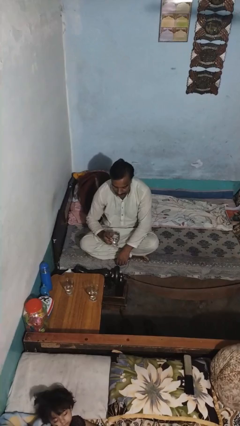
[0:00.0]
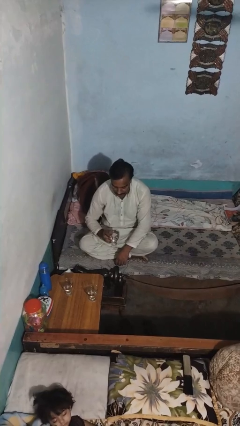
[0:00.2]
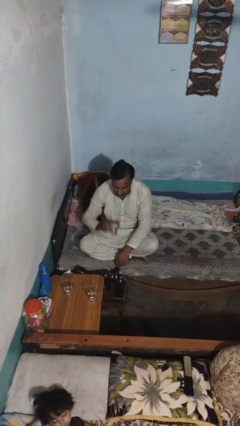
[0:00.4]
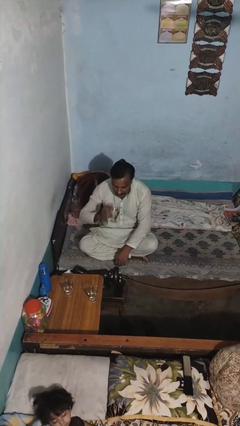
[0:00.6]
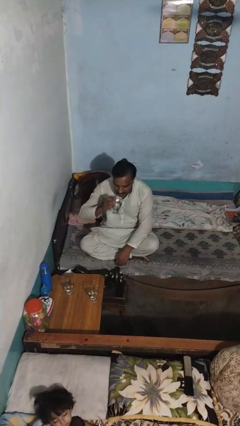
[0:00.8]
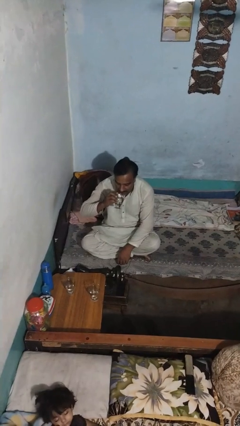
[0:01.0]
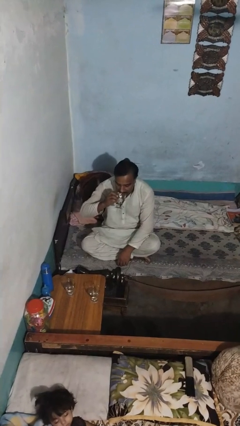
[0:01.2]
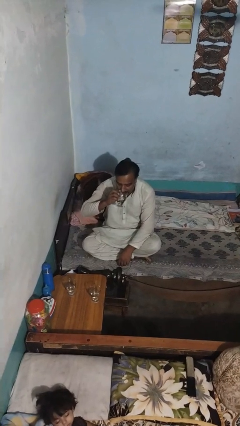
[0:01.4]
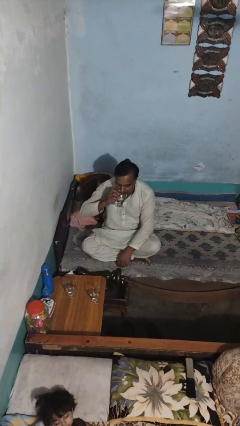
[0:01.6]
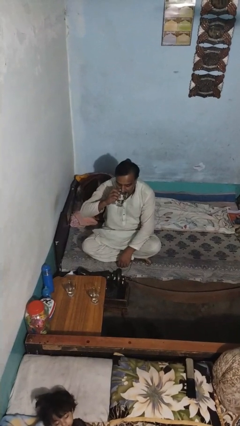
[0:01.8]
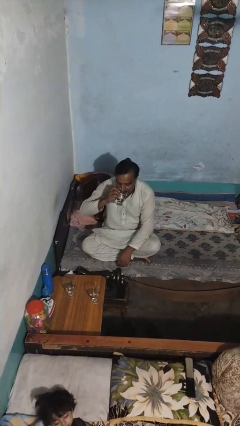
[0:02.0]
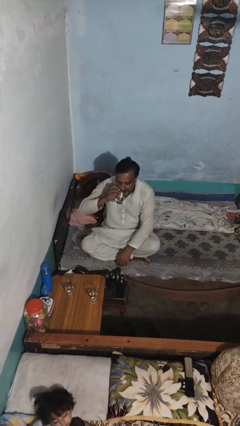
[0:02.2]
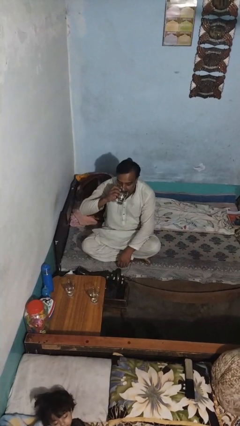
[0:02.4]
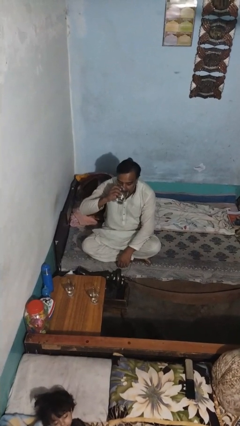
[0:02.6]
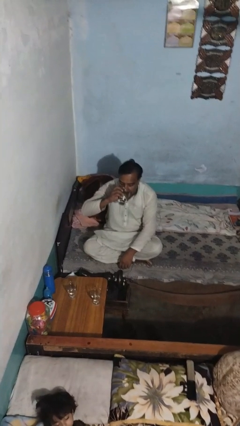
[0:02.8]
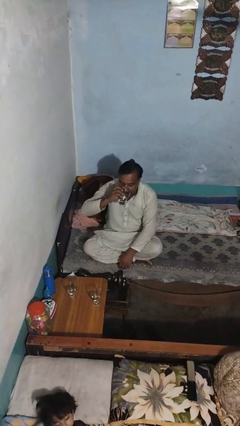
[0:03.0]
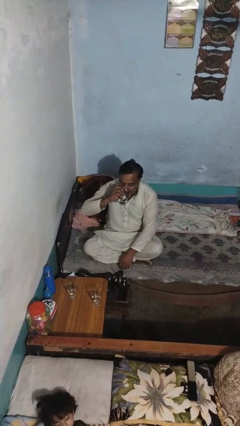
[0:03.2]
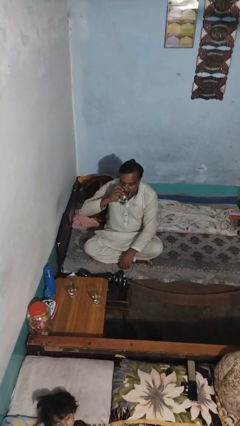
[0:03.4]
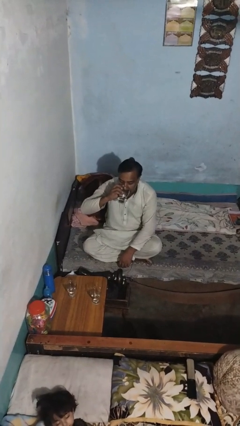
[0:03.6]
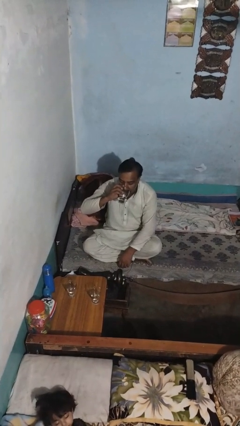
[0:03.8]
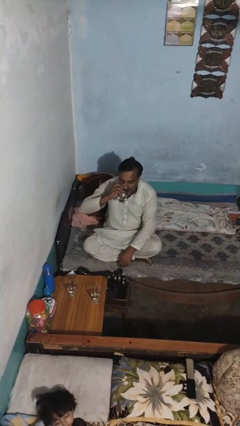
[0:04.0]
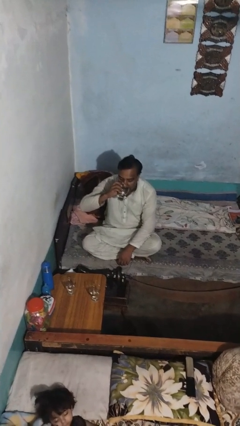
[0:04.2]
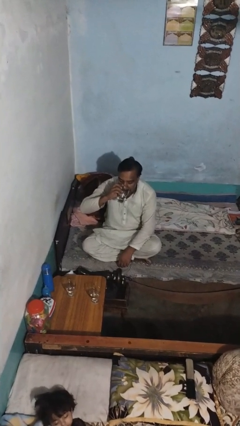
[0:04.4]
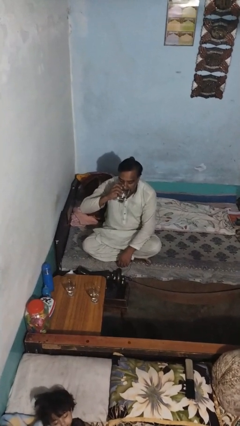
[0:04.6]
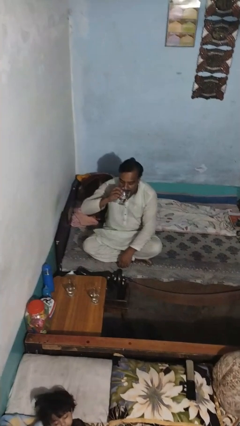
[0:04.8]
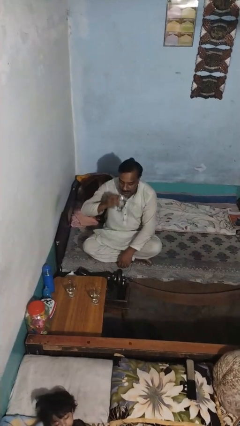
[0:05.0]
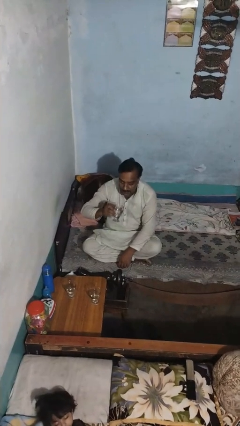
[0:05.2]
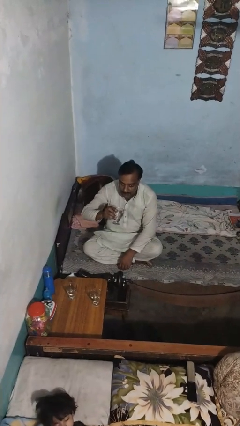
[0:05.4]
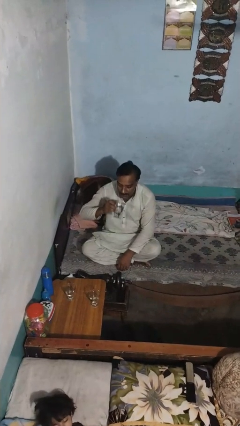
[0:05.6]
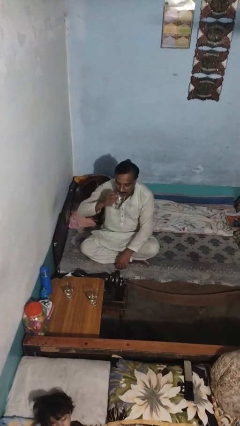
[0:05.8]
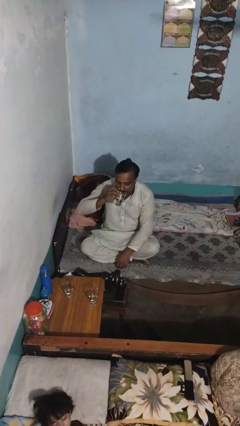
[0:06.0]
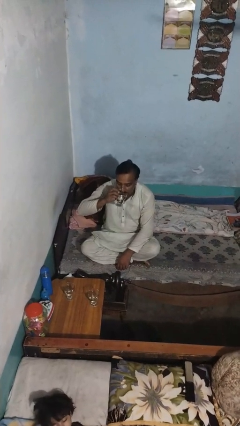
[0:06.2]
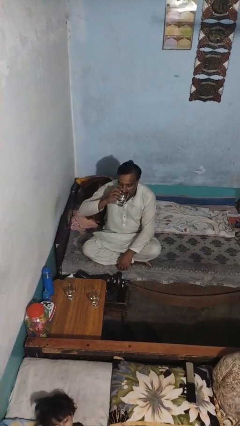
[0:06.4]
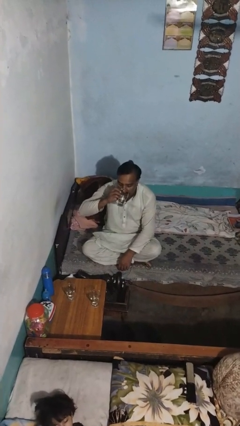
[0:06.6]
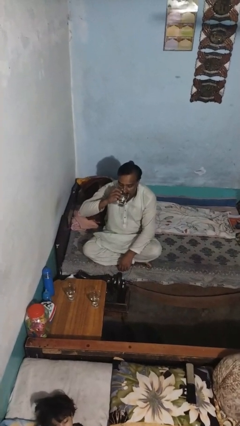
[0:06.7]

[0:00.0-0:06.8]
person drinks from shotglass

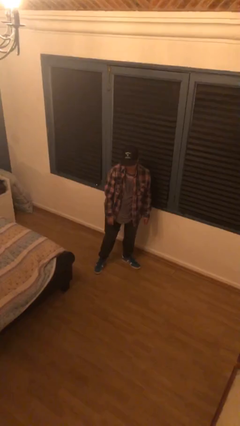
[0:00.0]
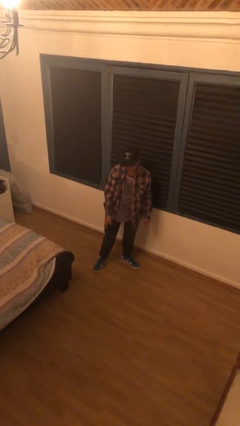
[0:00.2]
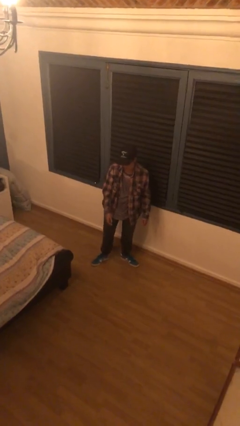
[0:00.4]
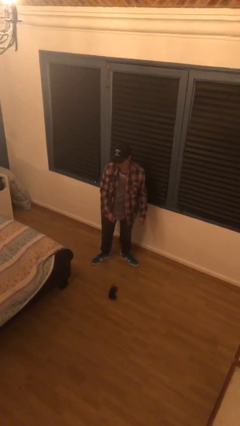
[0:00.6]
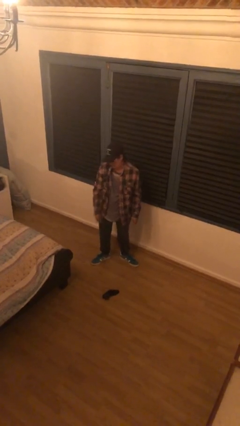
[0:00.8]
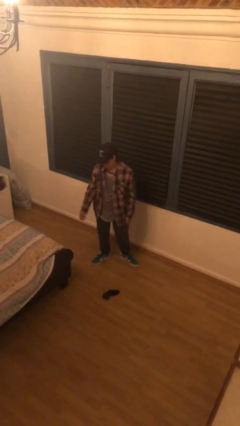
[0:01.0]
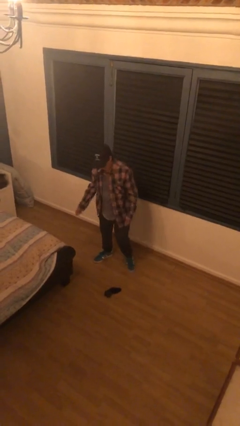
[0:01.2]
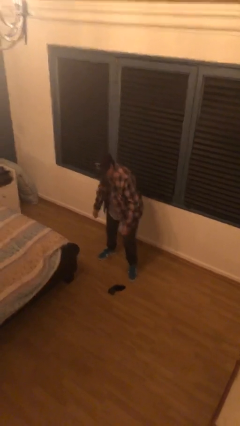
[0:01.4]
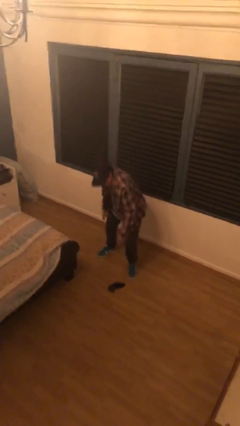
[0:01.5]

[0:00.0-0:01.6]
person drops object

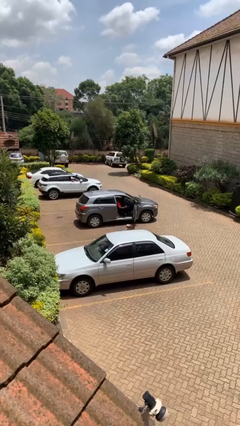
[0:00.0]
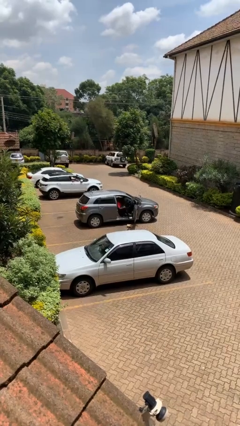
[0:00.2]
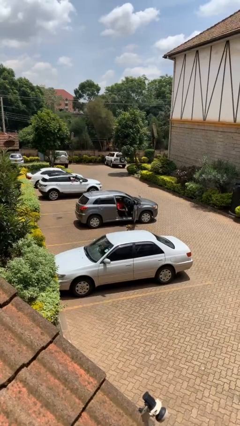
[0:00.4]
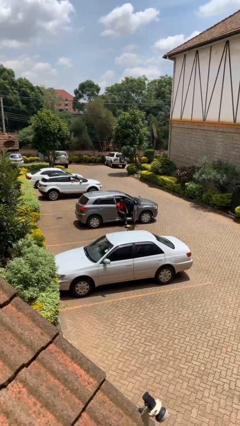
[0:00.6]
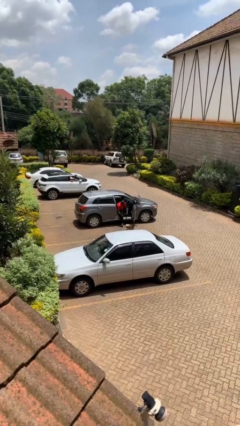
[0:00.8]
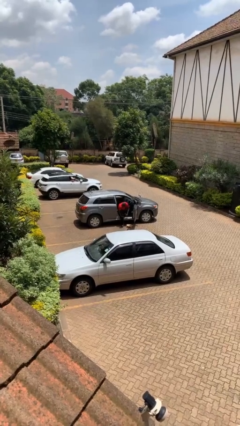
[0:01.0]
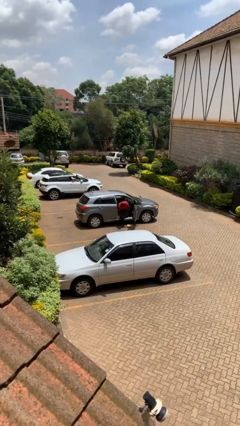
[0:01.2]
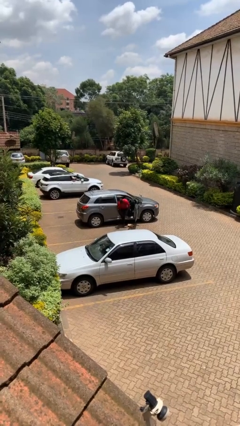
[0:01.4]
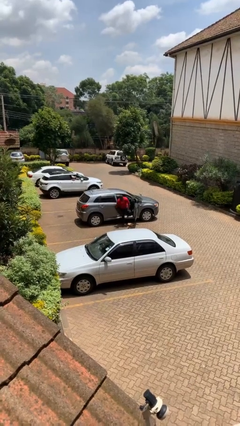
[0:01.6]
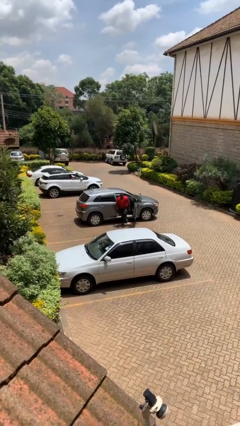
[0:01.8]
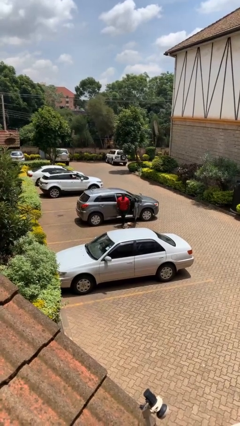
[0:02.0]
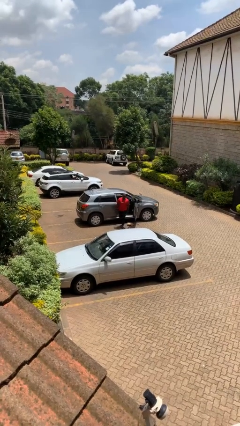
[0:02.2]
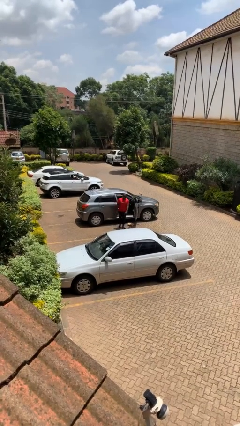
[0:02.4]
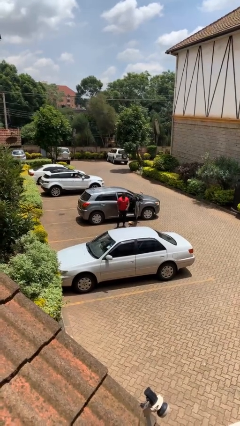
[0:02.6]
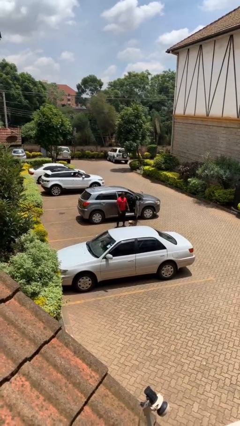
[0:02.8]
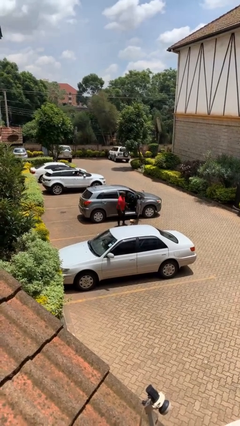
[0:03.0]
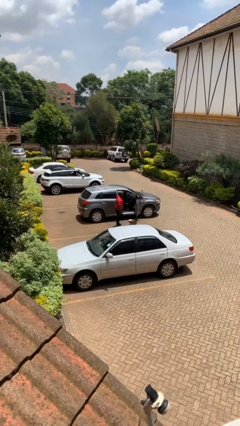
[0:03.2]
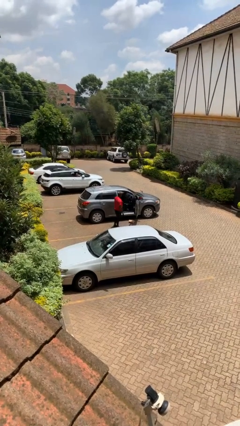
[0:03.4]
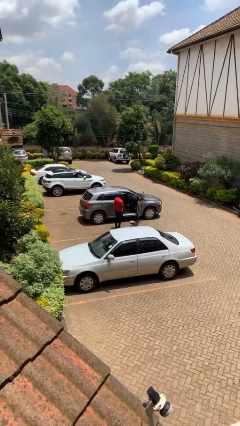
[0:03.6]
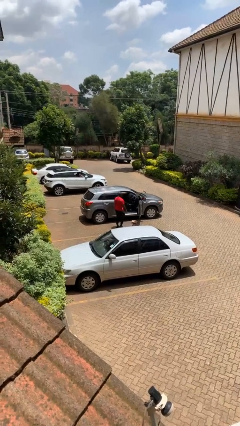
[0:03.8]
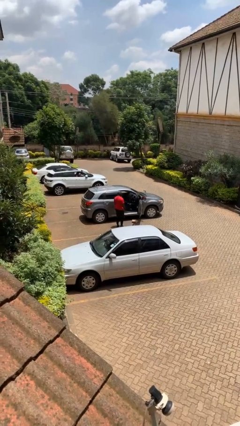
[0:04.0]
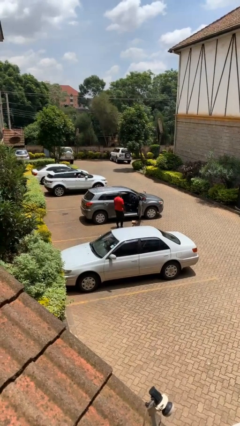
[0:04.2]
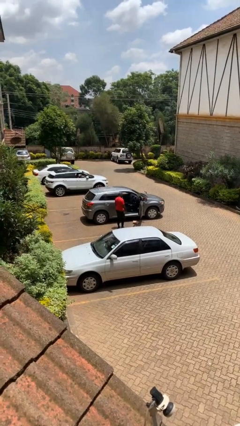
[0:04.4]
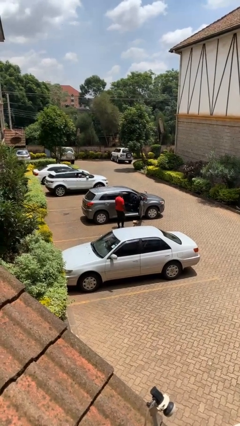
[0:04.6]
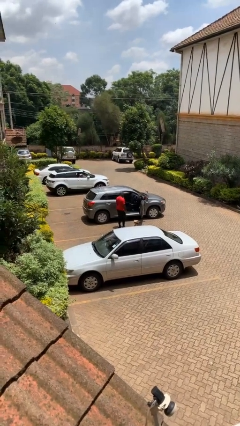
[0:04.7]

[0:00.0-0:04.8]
person exits car

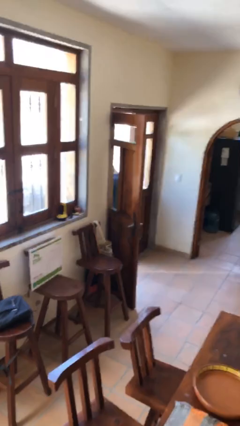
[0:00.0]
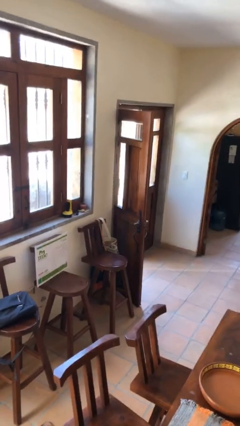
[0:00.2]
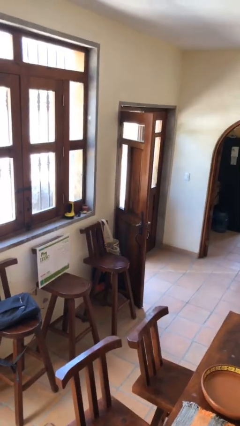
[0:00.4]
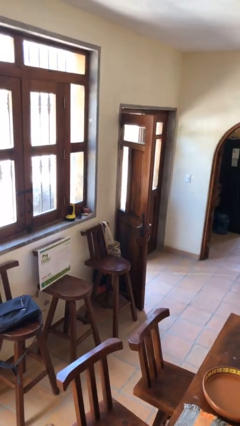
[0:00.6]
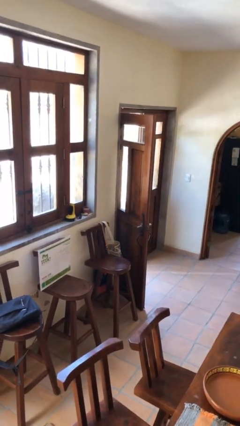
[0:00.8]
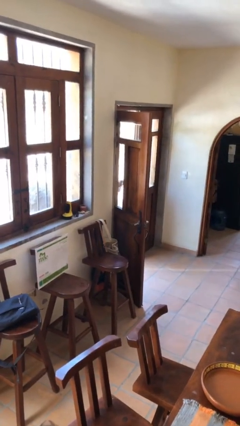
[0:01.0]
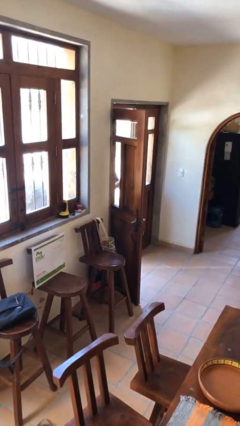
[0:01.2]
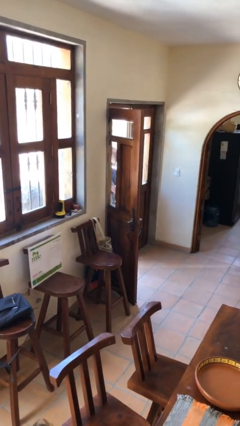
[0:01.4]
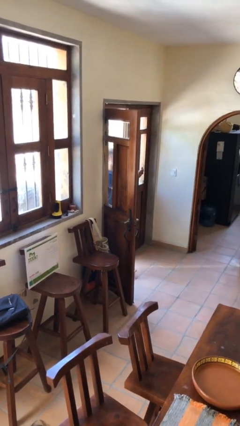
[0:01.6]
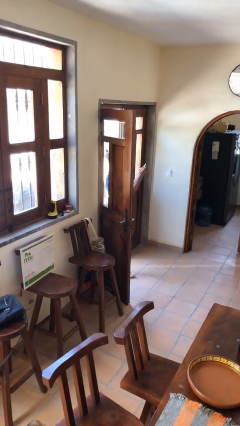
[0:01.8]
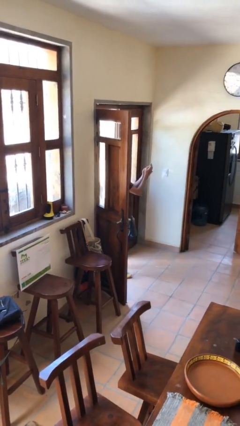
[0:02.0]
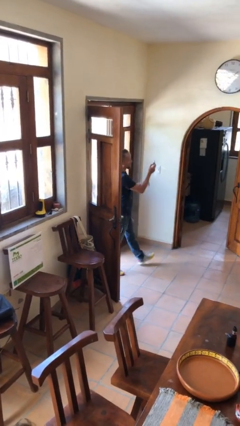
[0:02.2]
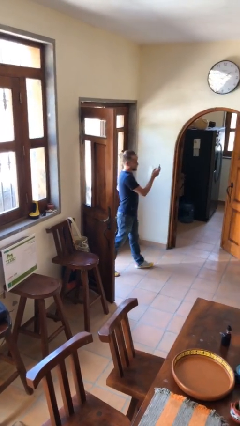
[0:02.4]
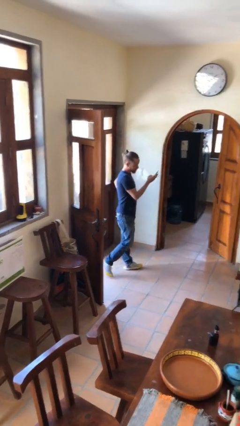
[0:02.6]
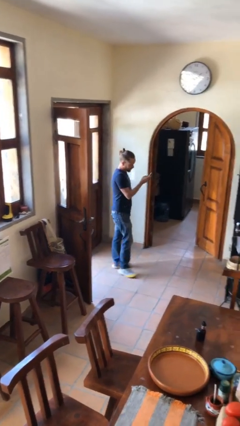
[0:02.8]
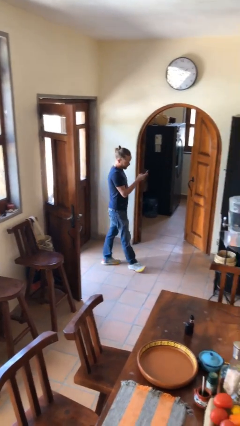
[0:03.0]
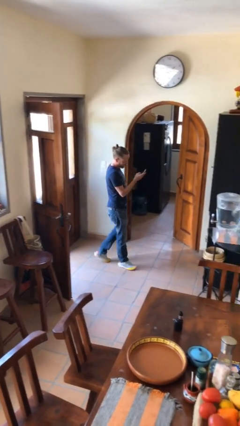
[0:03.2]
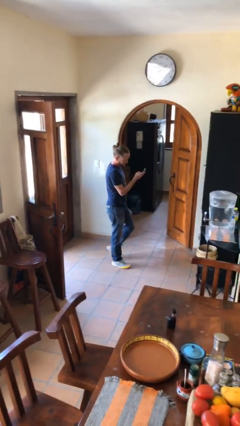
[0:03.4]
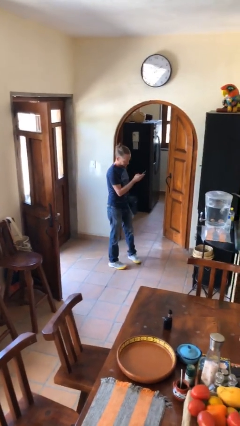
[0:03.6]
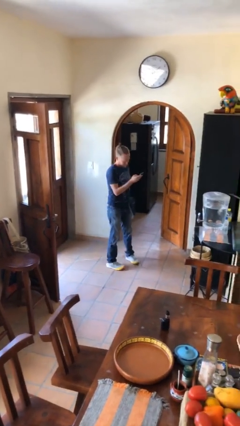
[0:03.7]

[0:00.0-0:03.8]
person enters scene through structure

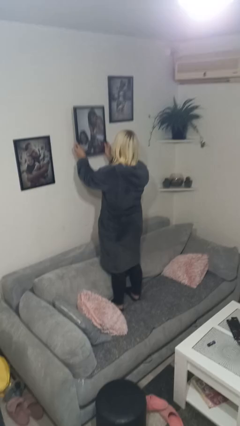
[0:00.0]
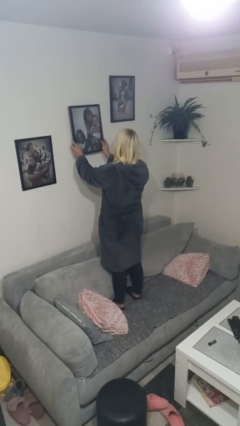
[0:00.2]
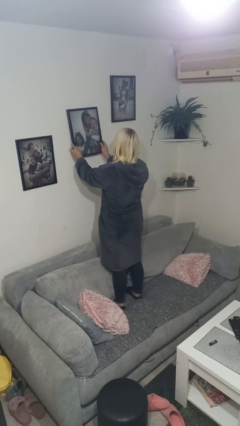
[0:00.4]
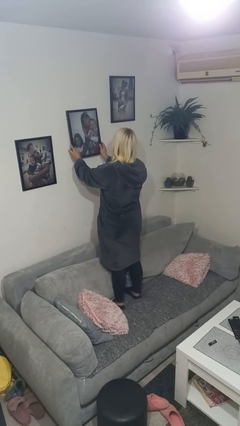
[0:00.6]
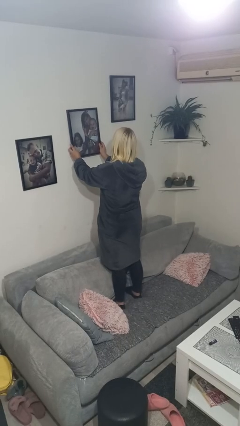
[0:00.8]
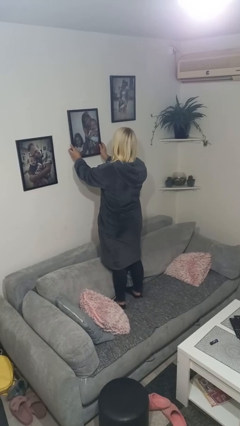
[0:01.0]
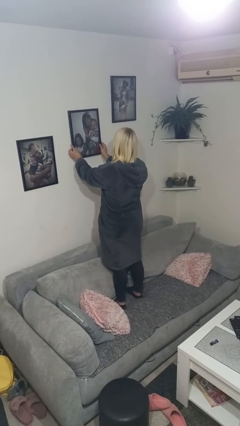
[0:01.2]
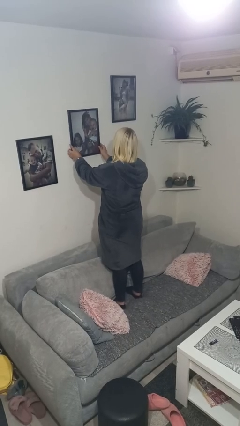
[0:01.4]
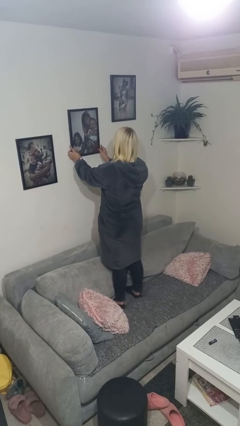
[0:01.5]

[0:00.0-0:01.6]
person puts up picture frame
